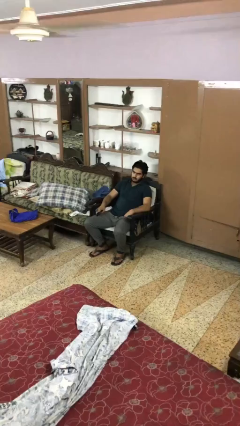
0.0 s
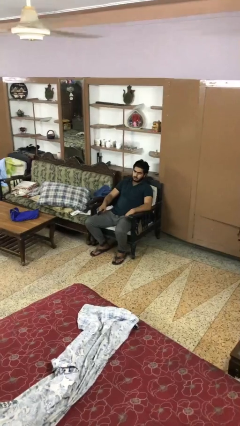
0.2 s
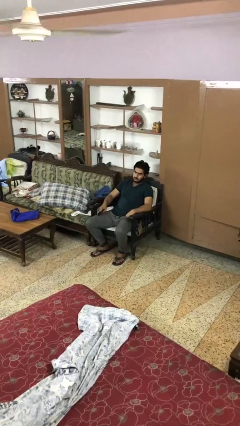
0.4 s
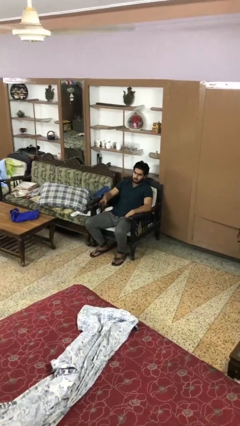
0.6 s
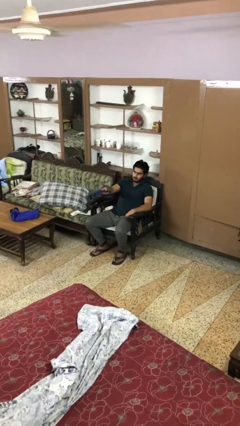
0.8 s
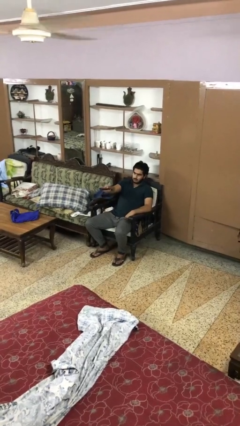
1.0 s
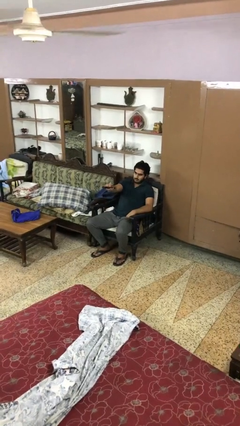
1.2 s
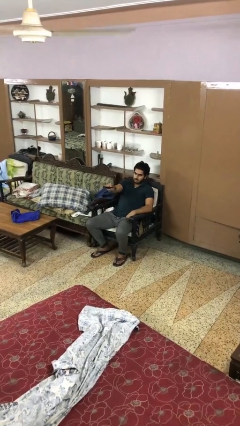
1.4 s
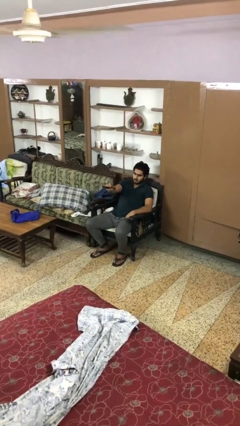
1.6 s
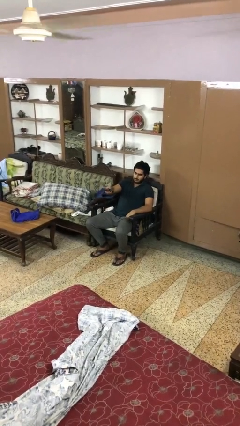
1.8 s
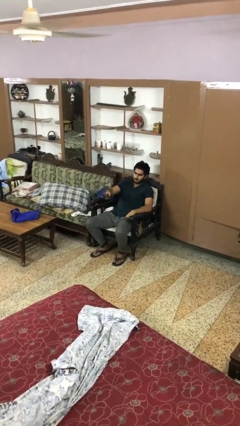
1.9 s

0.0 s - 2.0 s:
person uses television remote

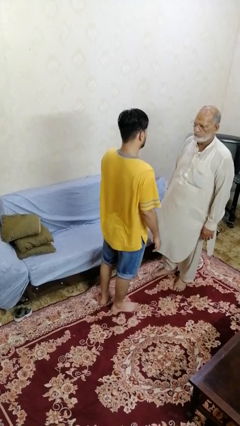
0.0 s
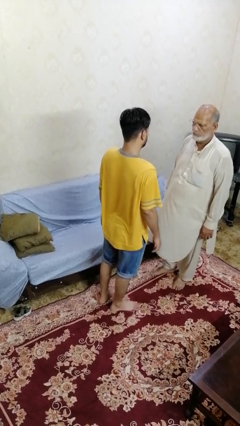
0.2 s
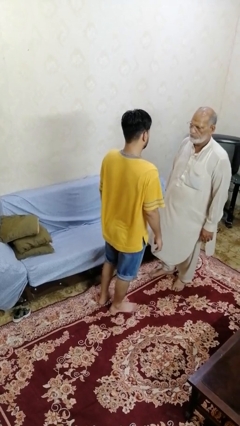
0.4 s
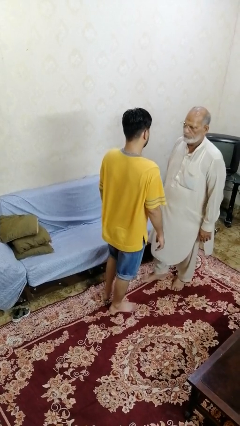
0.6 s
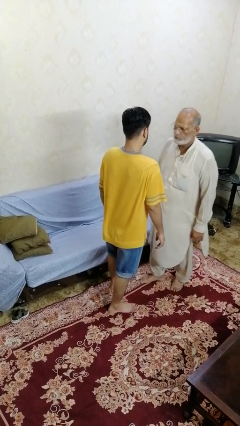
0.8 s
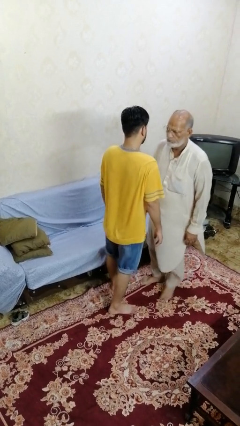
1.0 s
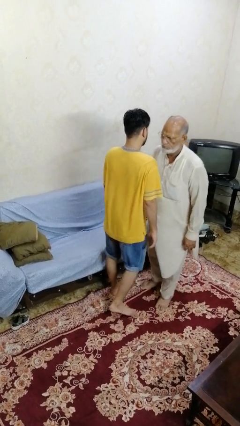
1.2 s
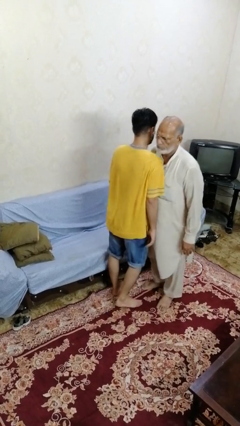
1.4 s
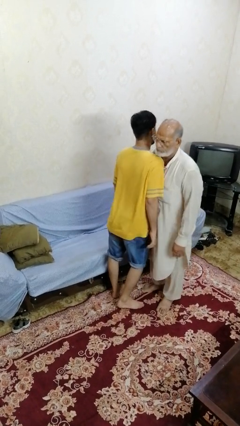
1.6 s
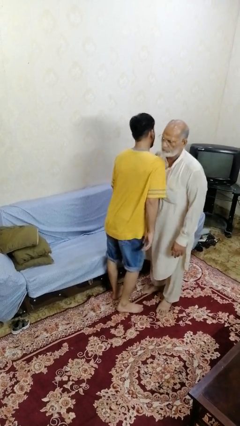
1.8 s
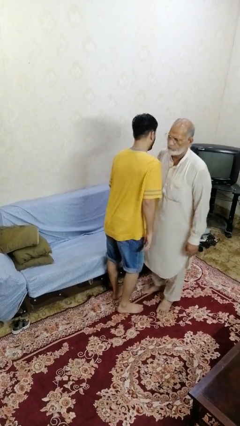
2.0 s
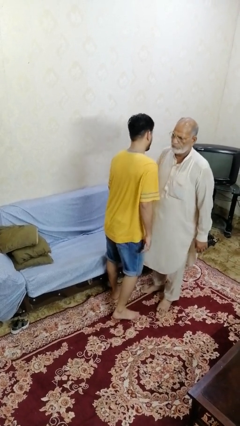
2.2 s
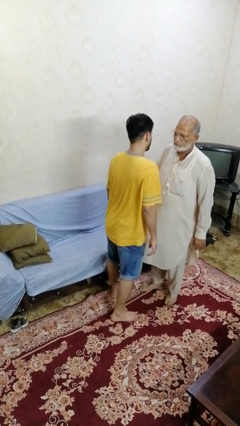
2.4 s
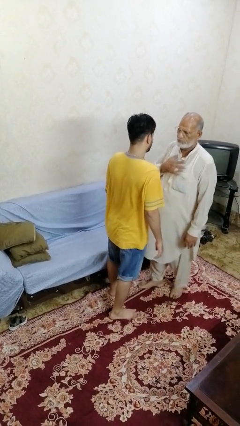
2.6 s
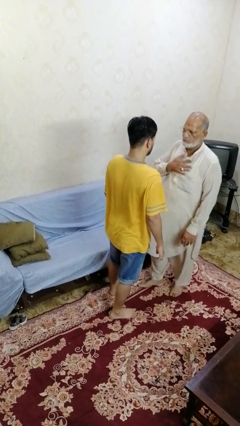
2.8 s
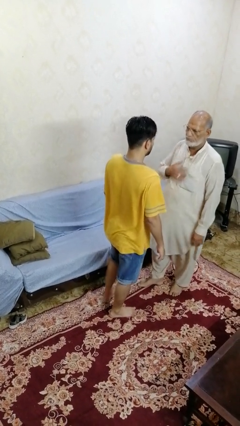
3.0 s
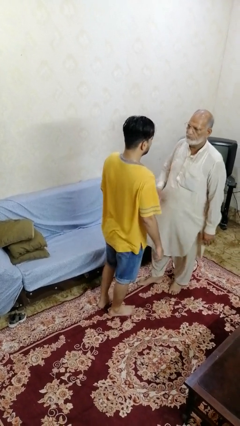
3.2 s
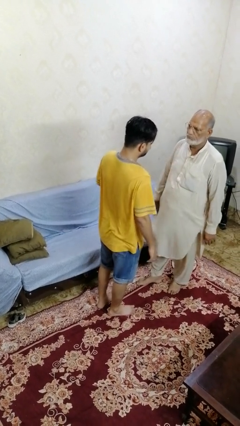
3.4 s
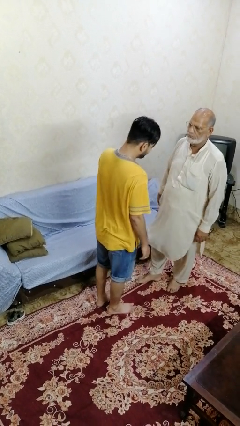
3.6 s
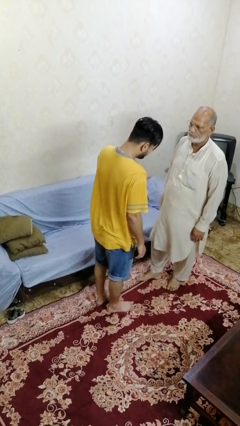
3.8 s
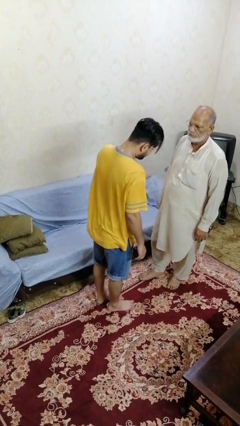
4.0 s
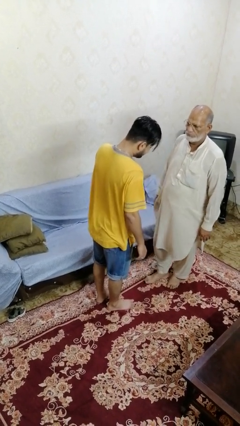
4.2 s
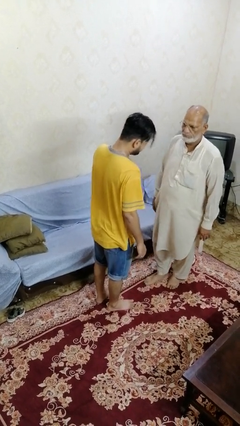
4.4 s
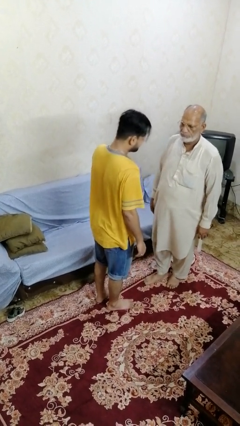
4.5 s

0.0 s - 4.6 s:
person bumps into person

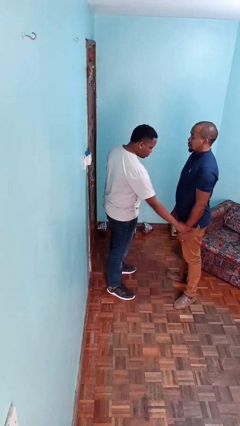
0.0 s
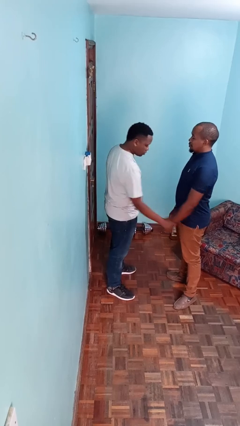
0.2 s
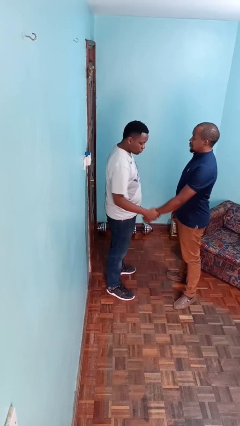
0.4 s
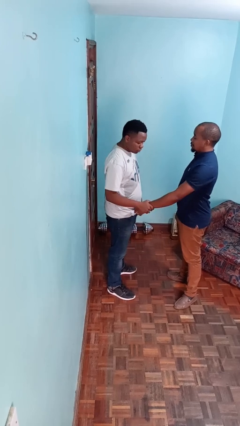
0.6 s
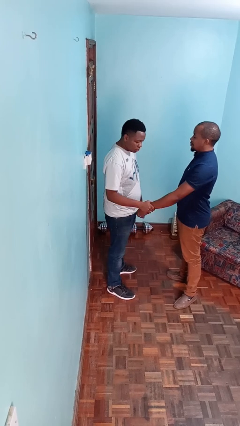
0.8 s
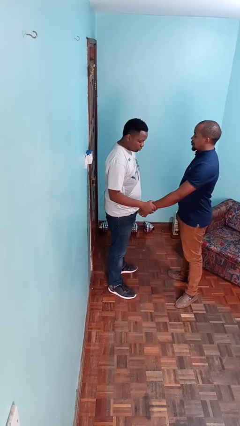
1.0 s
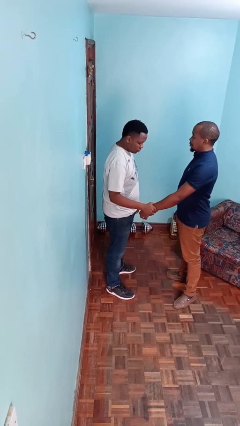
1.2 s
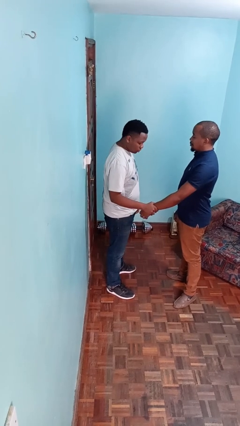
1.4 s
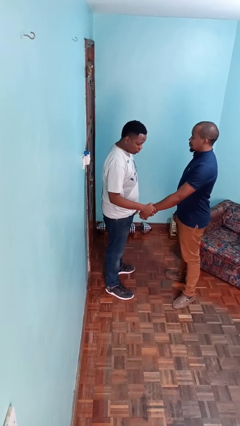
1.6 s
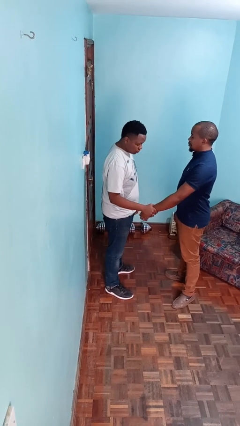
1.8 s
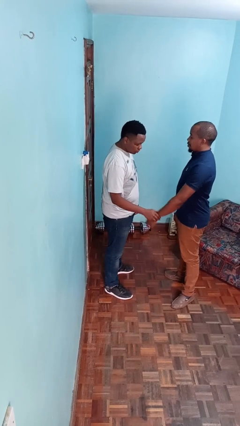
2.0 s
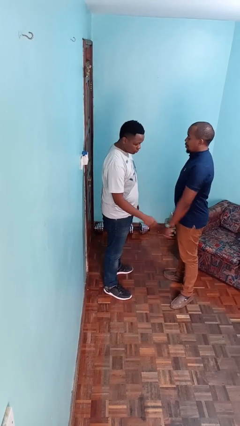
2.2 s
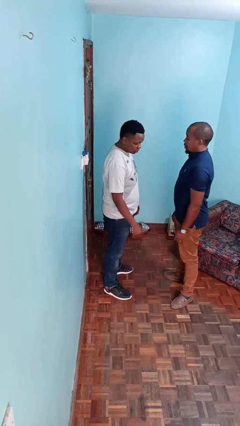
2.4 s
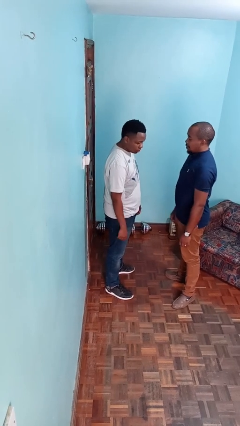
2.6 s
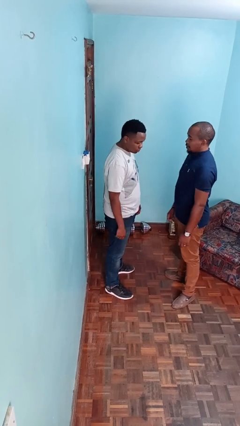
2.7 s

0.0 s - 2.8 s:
person grabs person by forearm

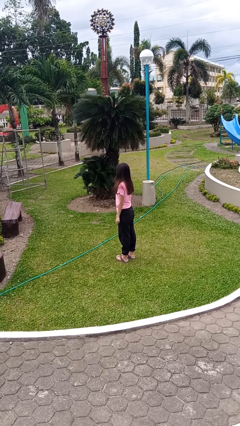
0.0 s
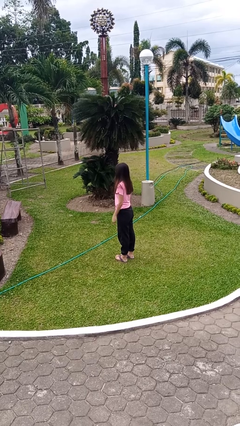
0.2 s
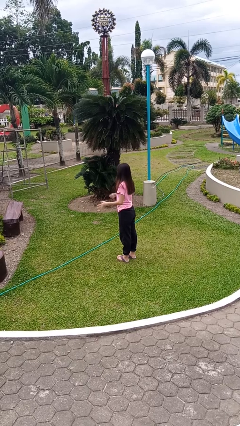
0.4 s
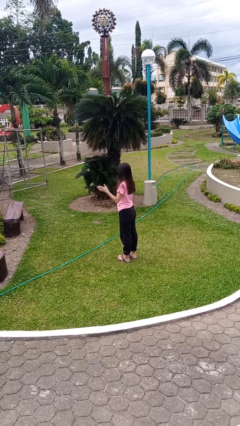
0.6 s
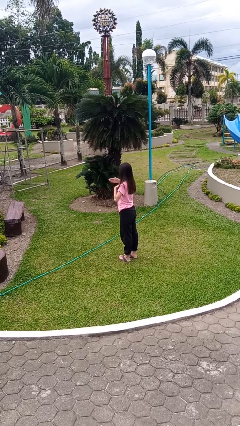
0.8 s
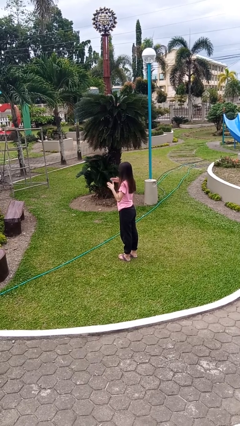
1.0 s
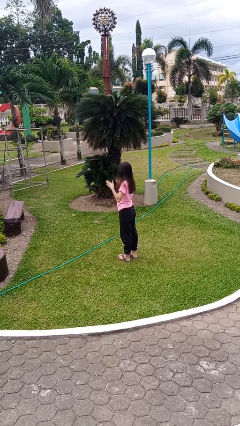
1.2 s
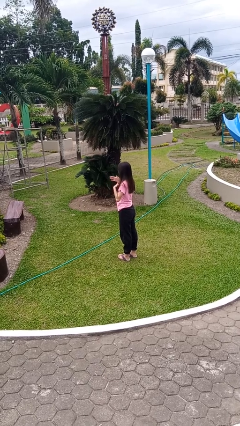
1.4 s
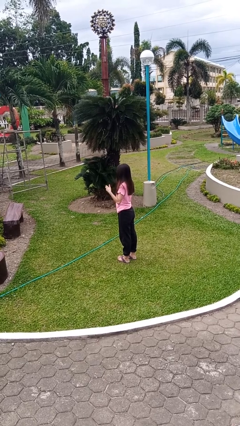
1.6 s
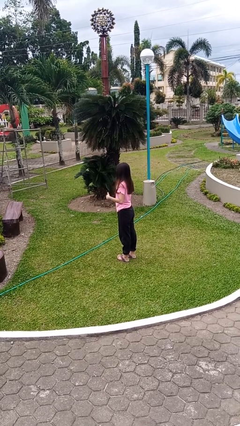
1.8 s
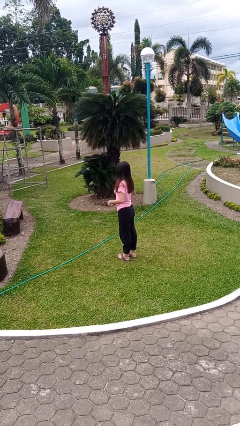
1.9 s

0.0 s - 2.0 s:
person drums on chest

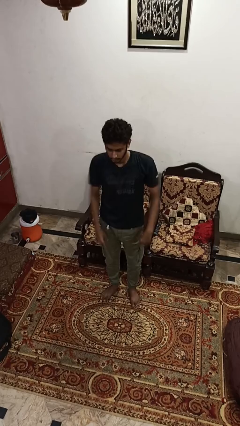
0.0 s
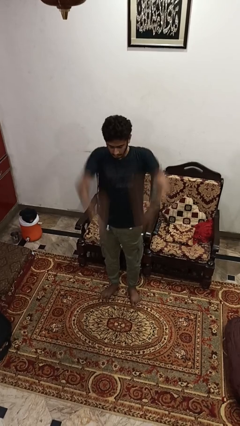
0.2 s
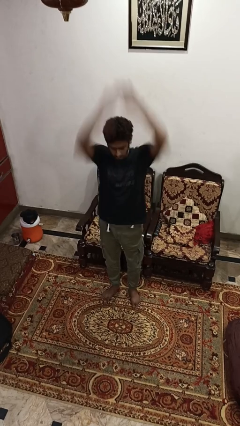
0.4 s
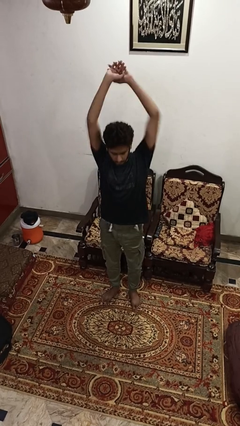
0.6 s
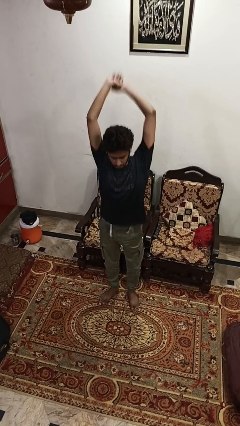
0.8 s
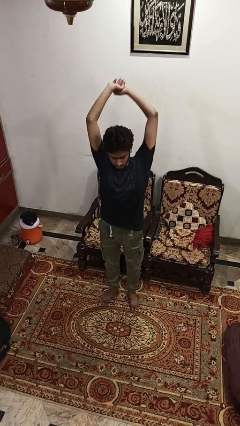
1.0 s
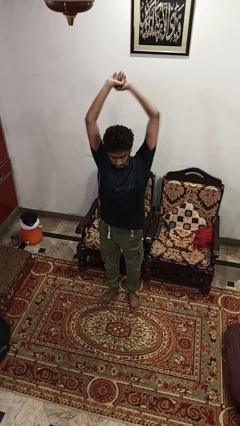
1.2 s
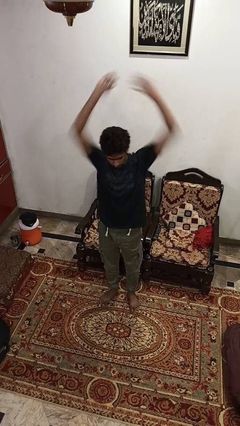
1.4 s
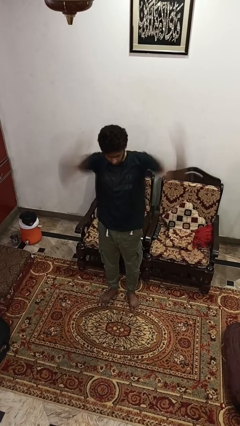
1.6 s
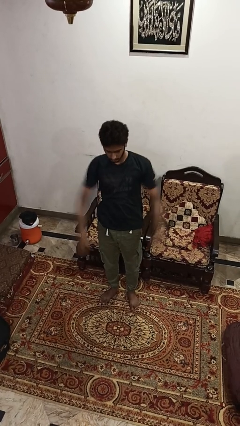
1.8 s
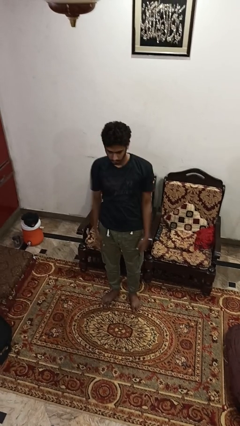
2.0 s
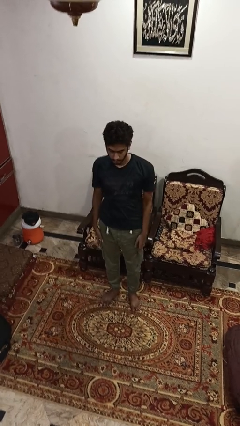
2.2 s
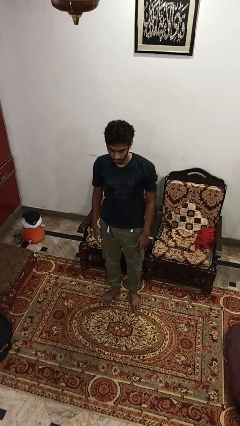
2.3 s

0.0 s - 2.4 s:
person stretches arms over head

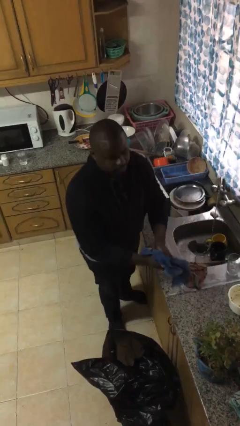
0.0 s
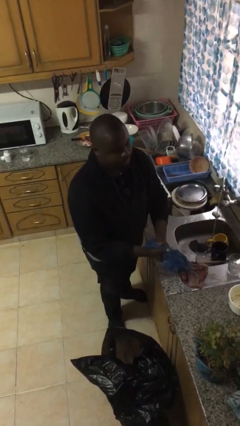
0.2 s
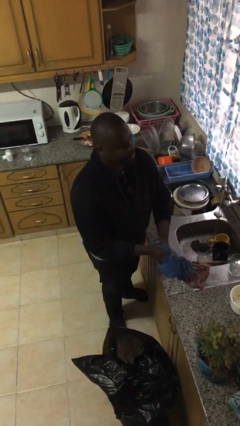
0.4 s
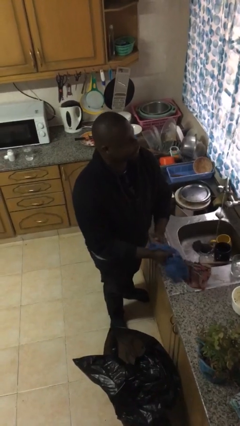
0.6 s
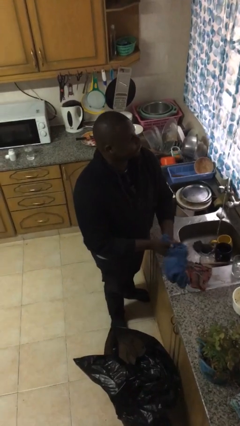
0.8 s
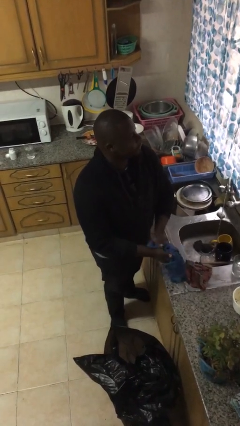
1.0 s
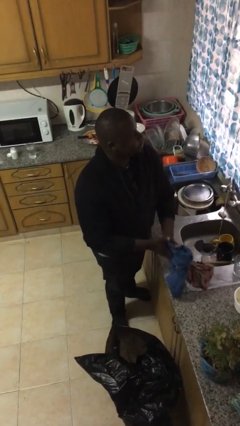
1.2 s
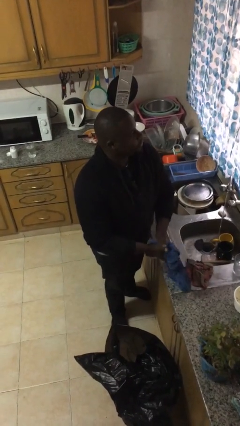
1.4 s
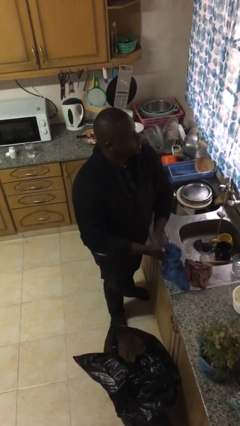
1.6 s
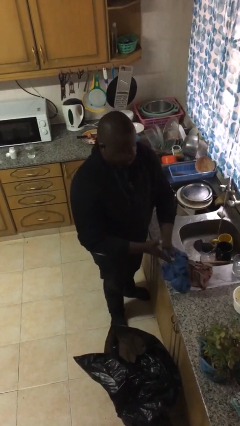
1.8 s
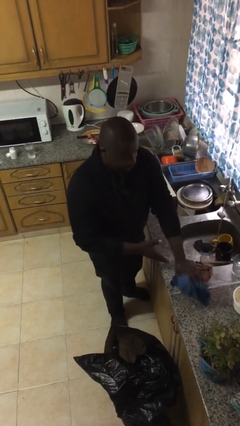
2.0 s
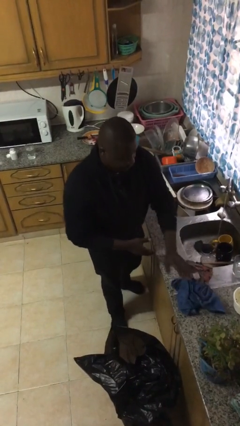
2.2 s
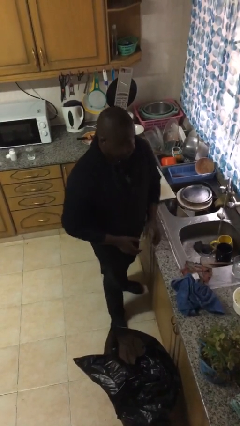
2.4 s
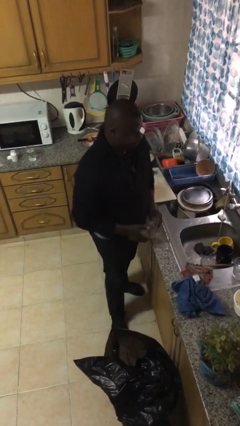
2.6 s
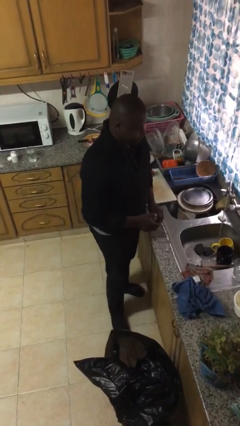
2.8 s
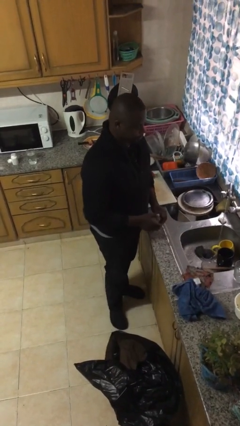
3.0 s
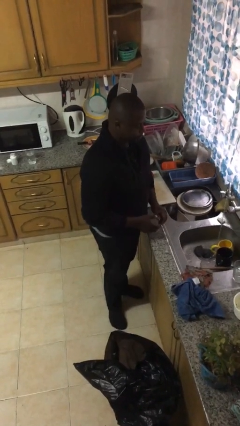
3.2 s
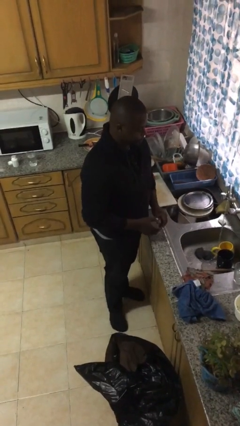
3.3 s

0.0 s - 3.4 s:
person dries hands with towel

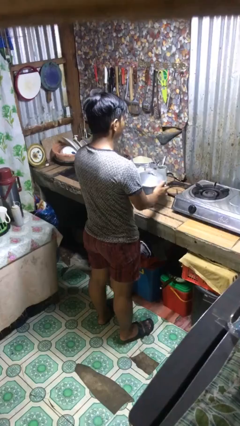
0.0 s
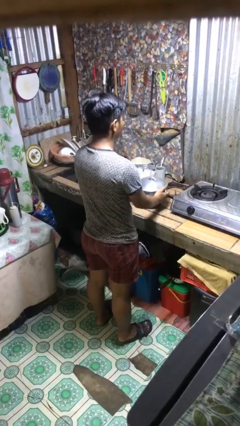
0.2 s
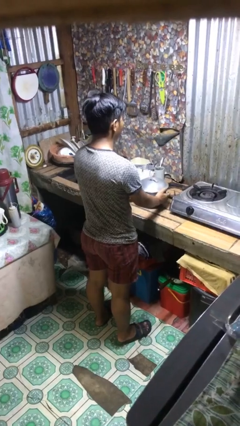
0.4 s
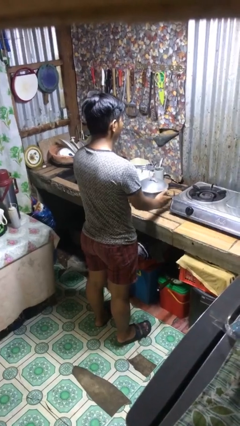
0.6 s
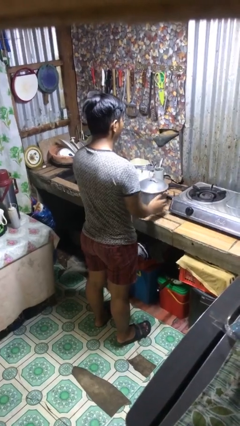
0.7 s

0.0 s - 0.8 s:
person puts down object on countertop
